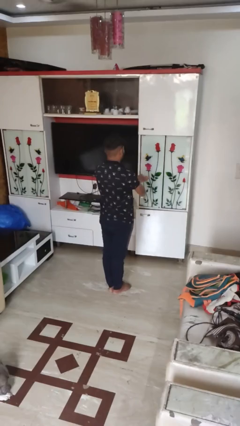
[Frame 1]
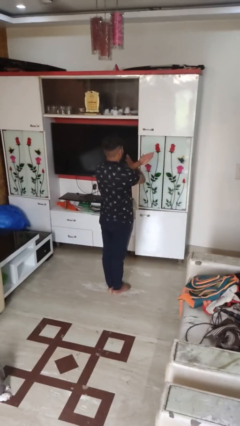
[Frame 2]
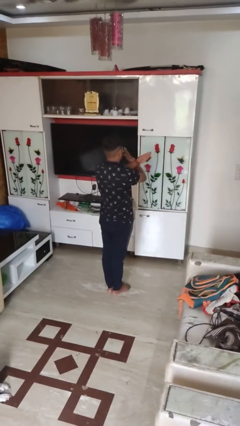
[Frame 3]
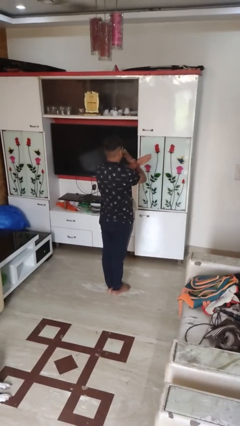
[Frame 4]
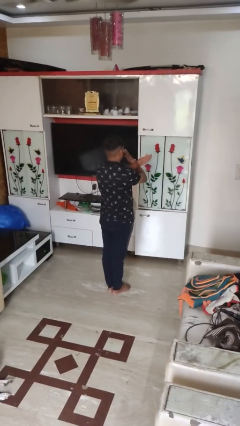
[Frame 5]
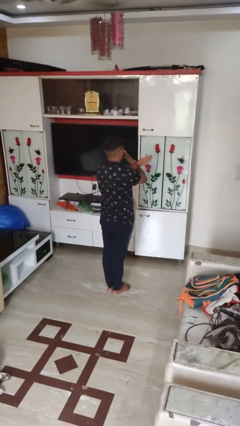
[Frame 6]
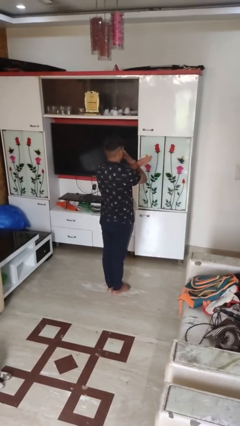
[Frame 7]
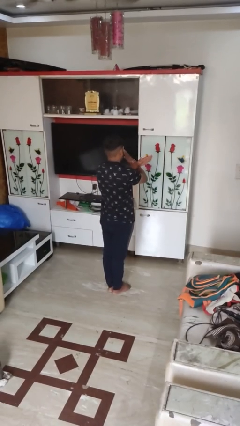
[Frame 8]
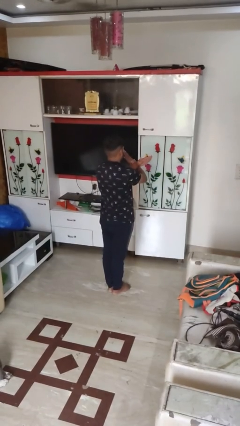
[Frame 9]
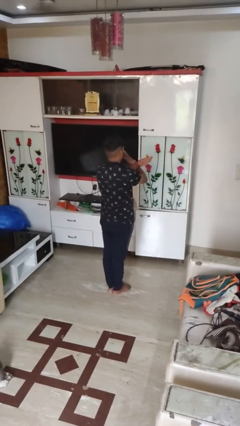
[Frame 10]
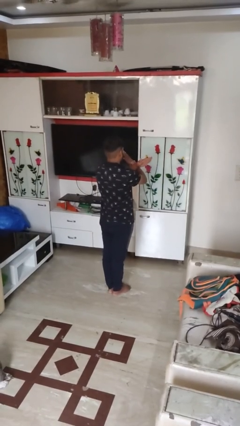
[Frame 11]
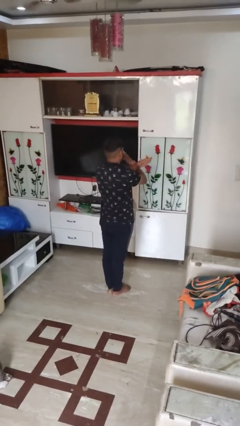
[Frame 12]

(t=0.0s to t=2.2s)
person gestures arms x

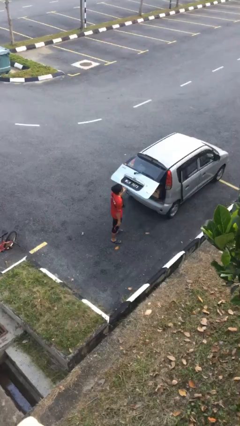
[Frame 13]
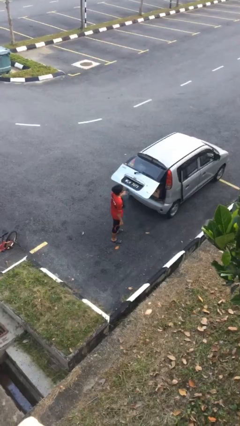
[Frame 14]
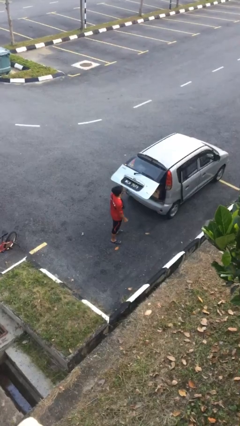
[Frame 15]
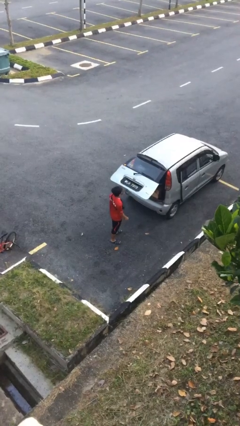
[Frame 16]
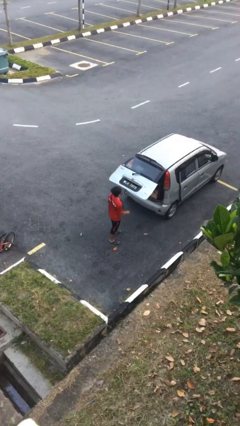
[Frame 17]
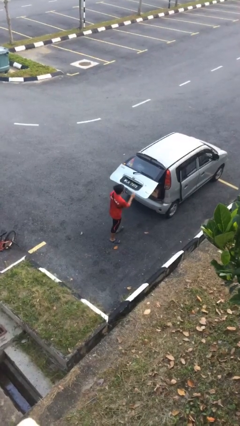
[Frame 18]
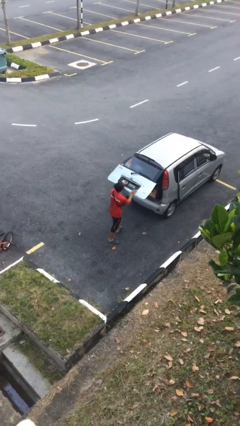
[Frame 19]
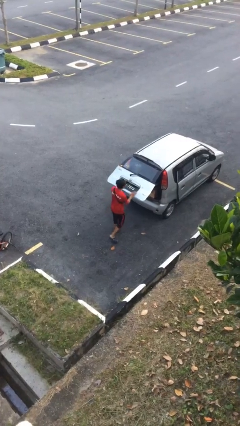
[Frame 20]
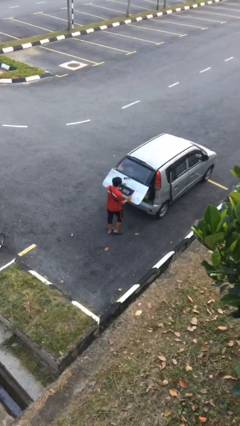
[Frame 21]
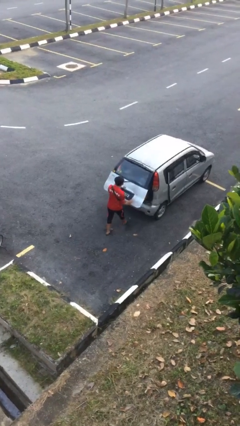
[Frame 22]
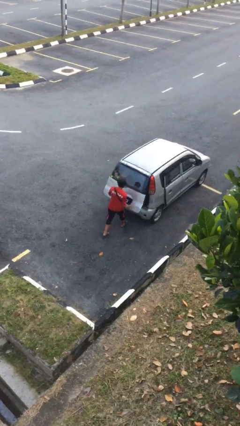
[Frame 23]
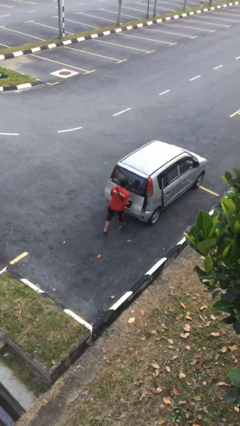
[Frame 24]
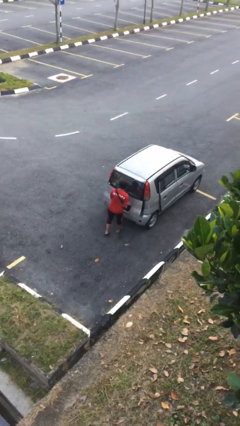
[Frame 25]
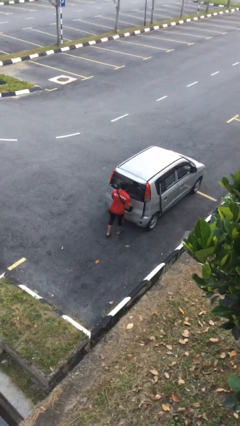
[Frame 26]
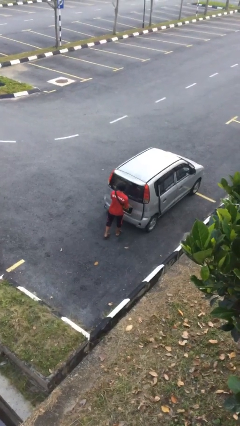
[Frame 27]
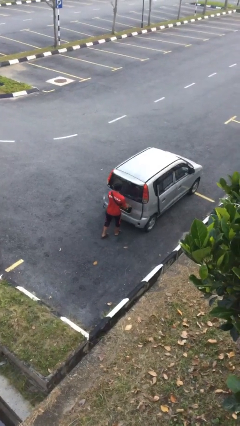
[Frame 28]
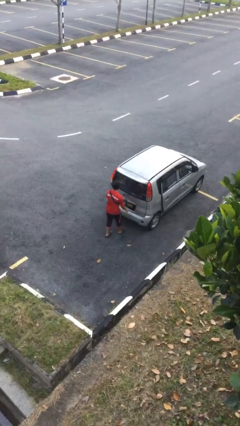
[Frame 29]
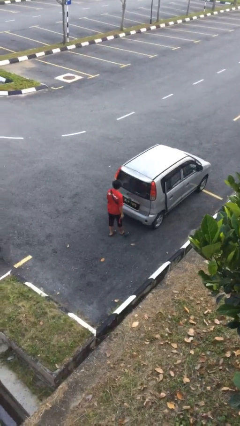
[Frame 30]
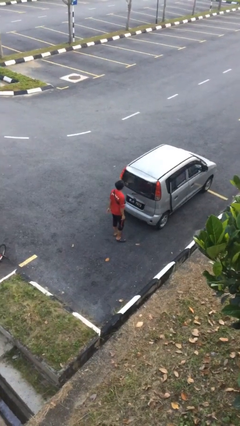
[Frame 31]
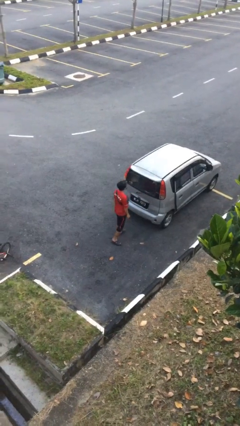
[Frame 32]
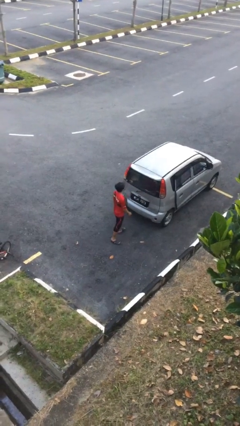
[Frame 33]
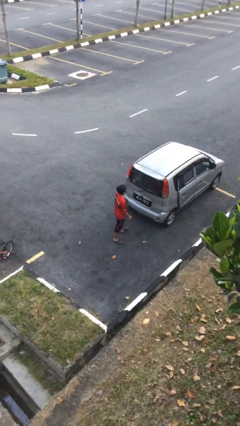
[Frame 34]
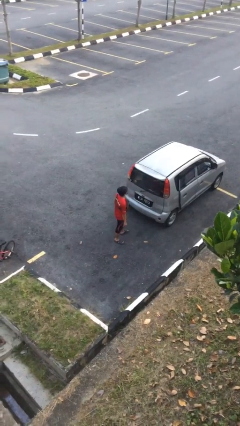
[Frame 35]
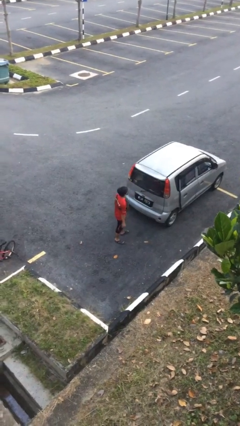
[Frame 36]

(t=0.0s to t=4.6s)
person closes car trunk

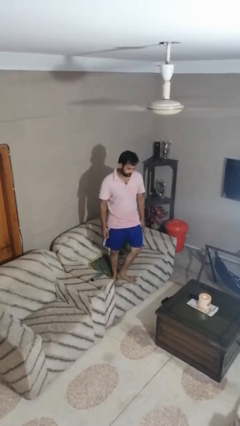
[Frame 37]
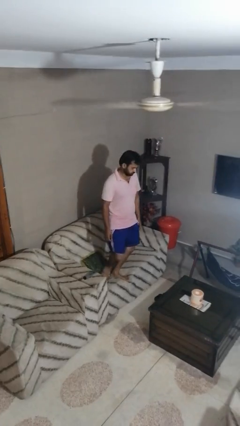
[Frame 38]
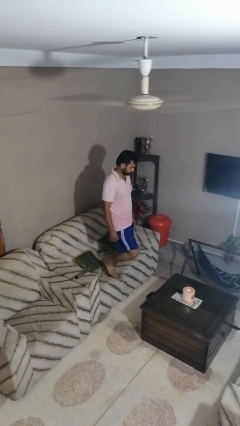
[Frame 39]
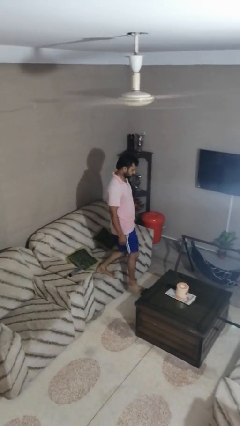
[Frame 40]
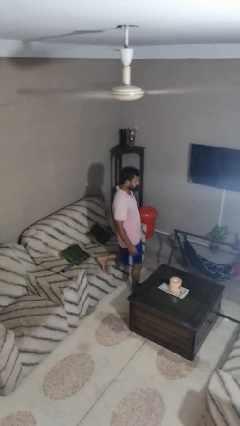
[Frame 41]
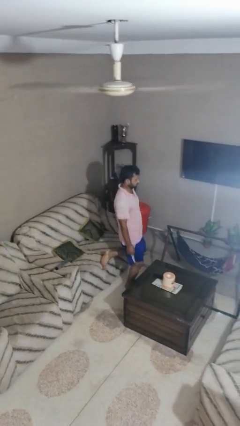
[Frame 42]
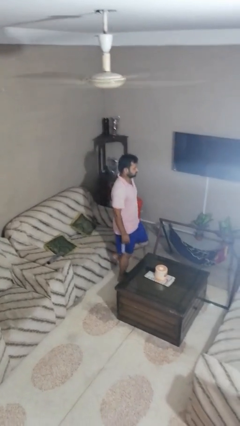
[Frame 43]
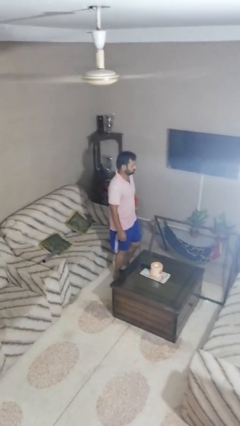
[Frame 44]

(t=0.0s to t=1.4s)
person climbs off couch

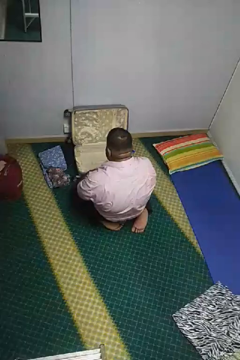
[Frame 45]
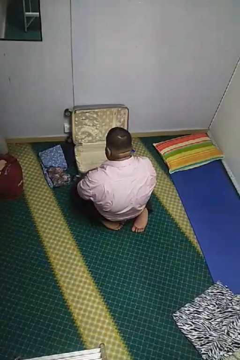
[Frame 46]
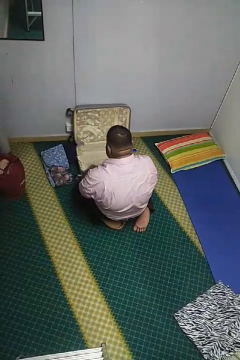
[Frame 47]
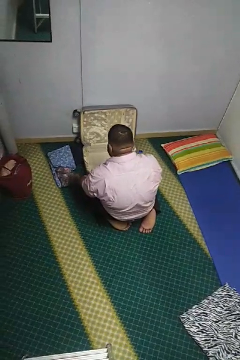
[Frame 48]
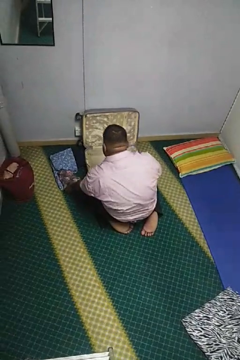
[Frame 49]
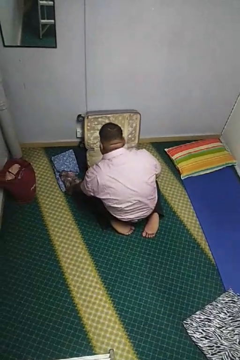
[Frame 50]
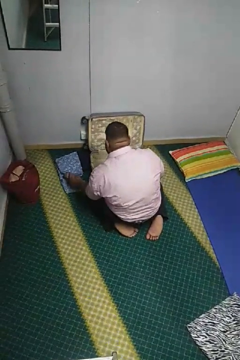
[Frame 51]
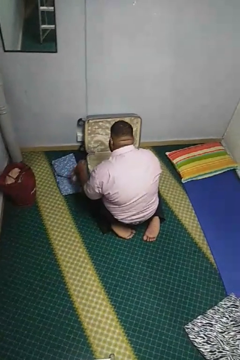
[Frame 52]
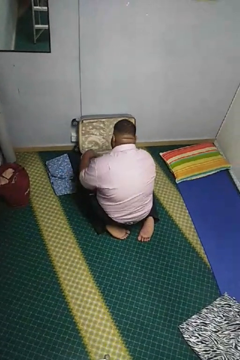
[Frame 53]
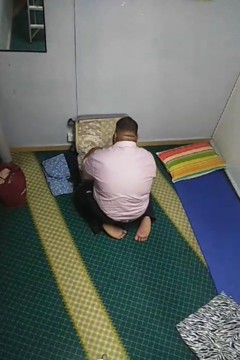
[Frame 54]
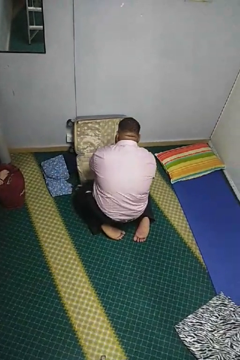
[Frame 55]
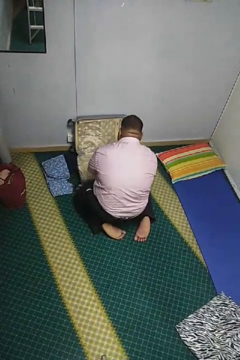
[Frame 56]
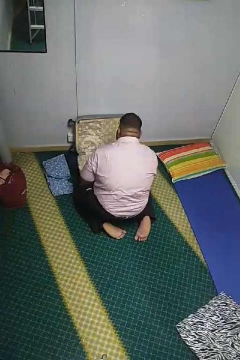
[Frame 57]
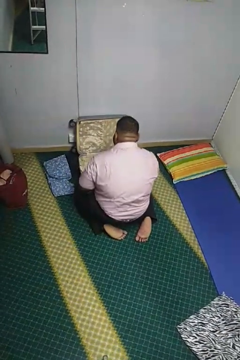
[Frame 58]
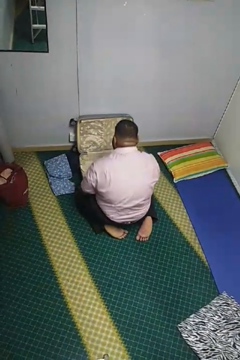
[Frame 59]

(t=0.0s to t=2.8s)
person loads clothes into suitcase

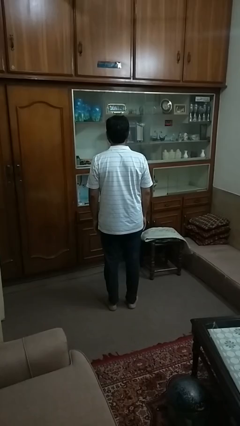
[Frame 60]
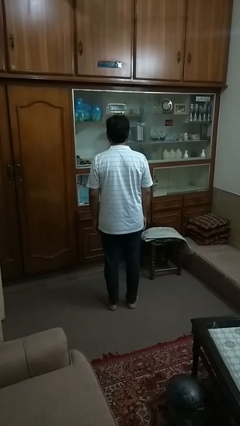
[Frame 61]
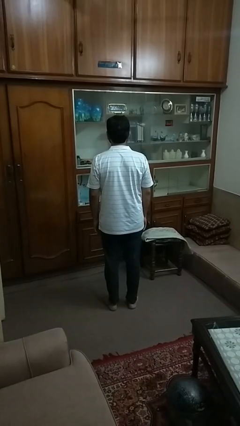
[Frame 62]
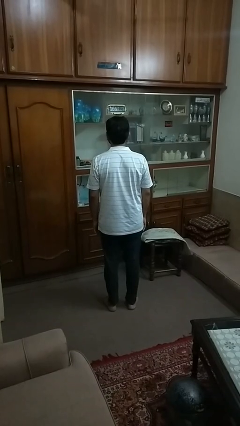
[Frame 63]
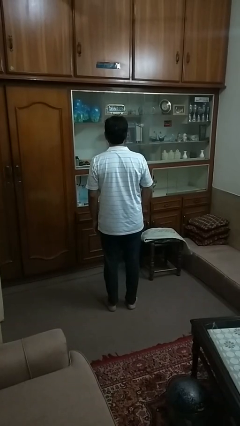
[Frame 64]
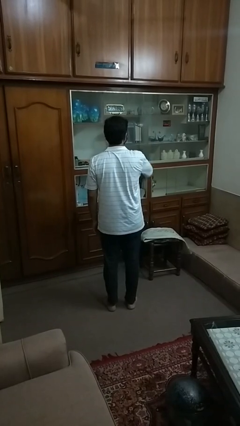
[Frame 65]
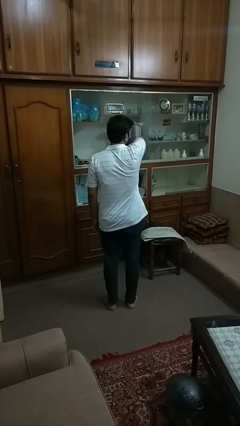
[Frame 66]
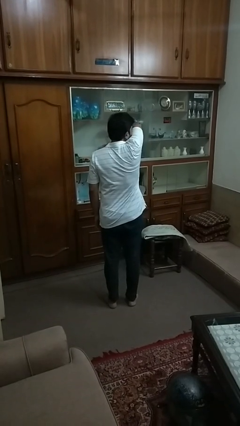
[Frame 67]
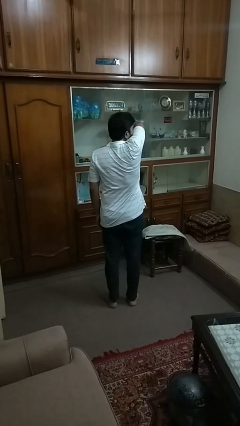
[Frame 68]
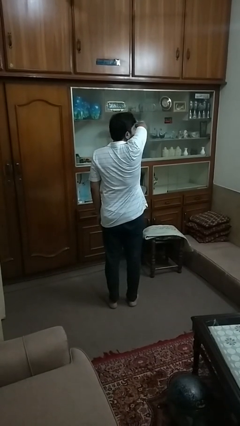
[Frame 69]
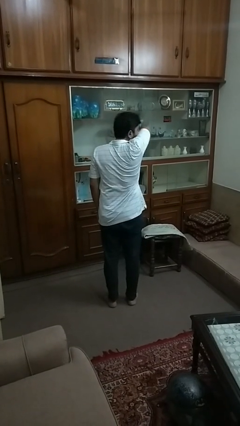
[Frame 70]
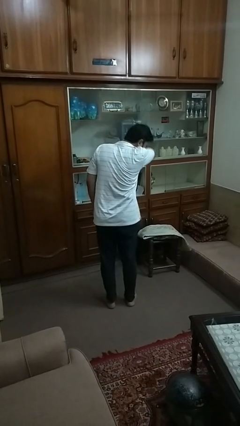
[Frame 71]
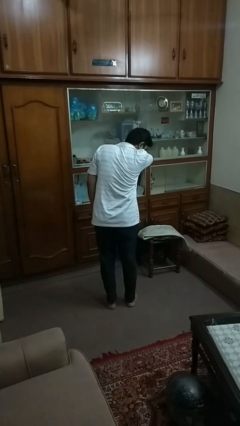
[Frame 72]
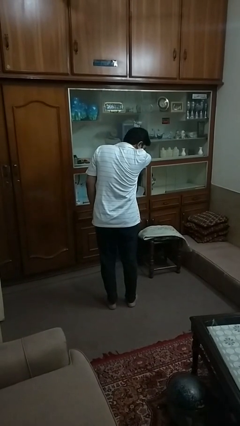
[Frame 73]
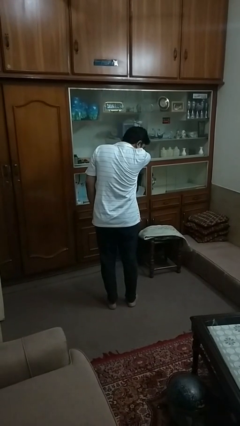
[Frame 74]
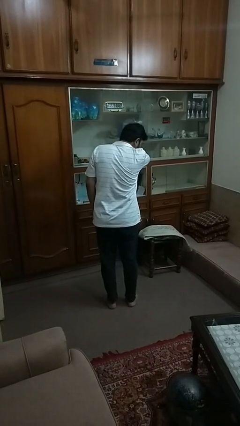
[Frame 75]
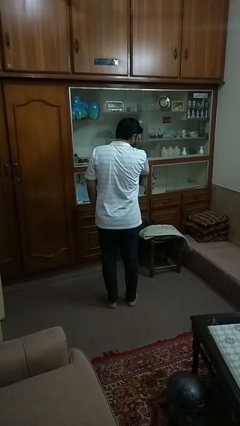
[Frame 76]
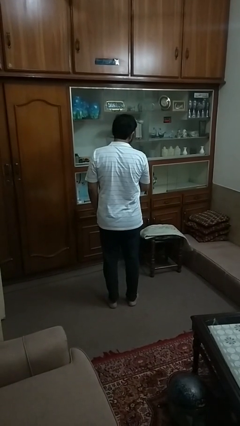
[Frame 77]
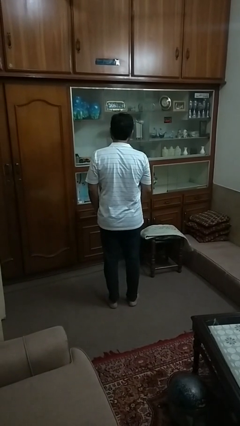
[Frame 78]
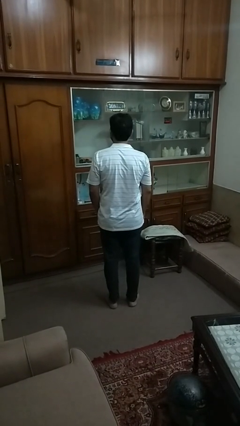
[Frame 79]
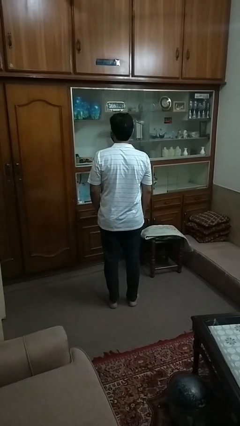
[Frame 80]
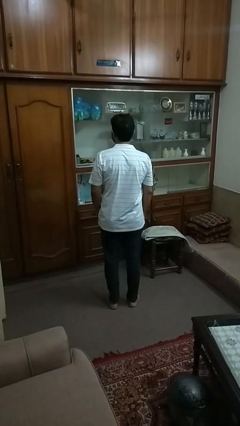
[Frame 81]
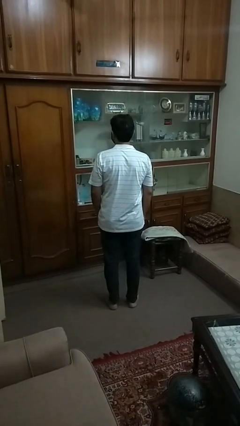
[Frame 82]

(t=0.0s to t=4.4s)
person sneezes into arm

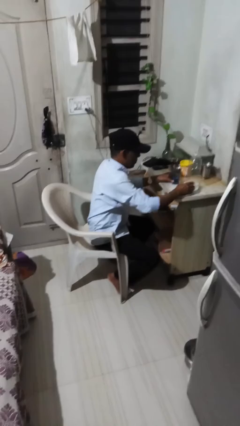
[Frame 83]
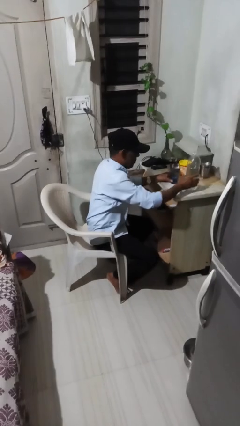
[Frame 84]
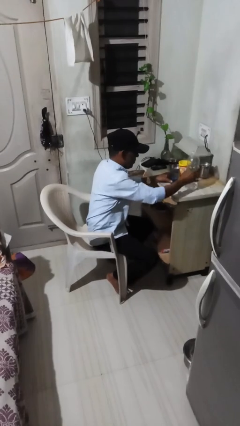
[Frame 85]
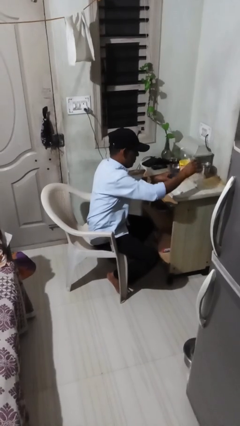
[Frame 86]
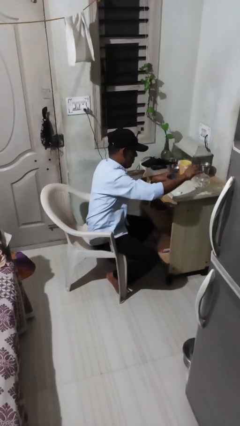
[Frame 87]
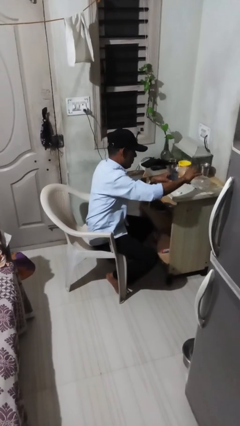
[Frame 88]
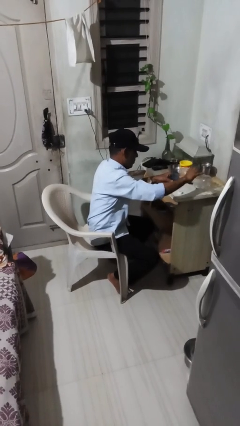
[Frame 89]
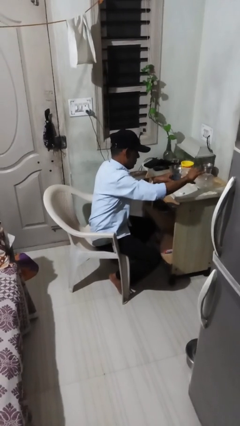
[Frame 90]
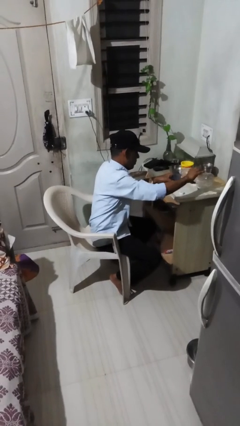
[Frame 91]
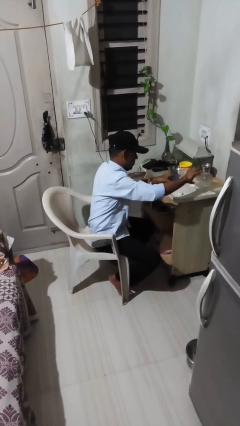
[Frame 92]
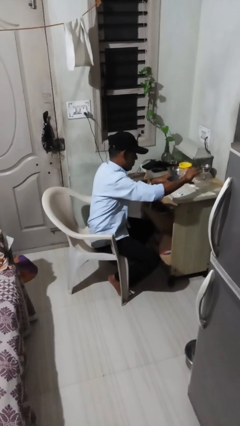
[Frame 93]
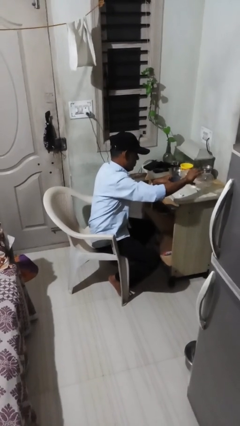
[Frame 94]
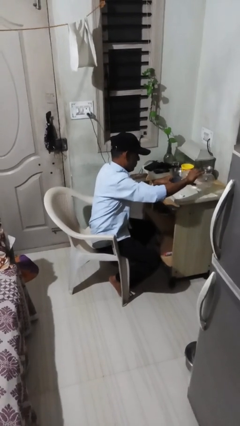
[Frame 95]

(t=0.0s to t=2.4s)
person pours liquid into cup

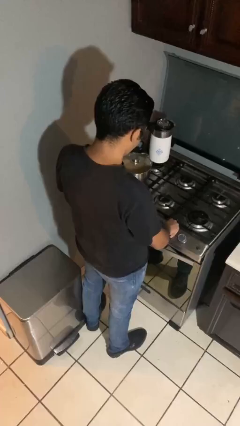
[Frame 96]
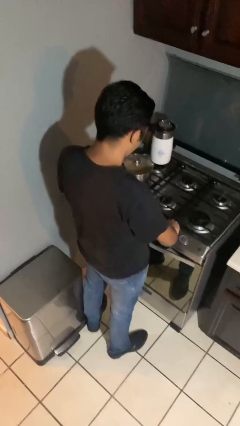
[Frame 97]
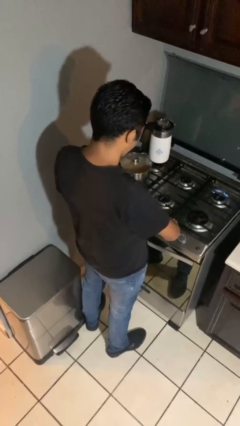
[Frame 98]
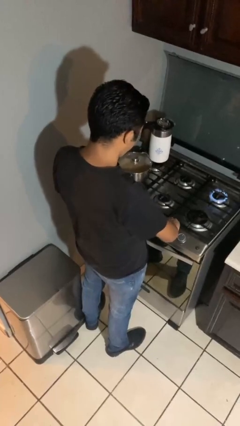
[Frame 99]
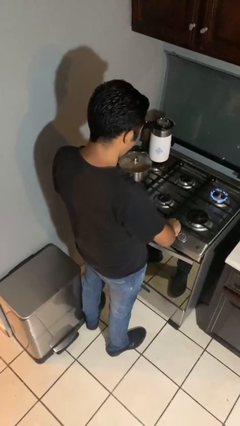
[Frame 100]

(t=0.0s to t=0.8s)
person turns on stovetop
